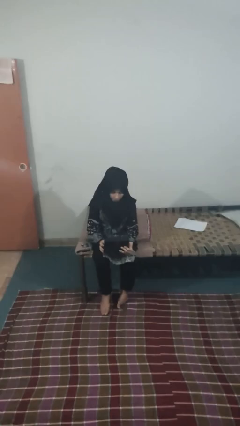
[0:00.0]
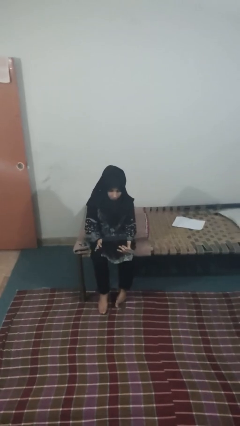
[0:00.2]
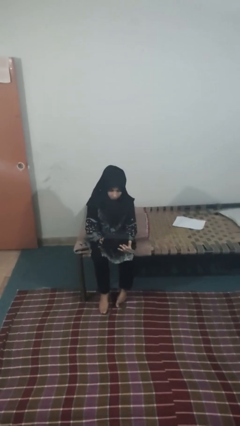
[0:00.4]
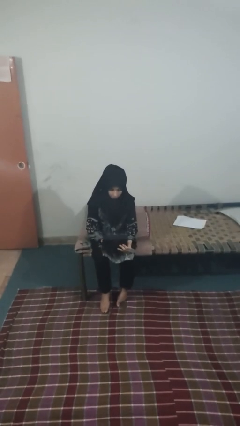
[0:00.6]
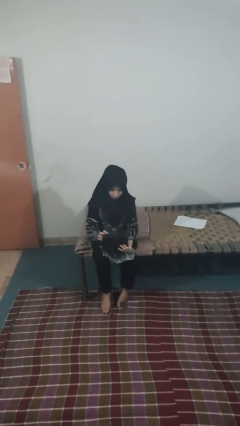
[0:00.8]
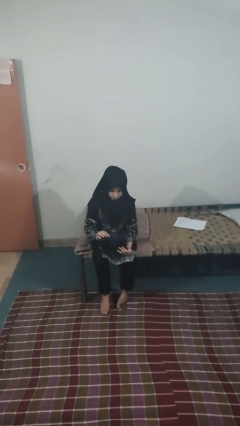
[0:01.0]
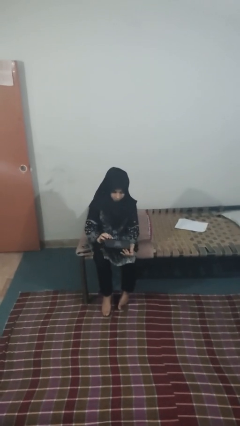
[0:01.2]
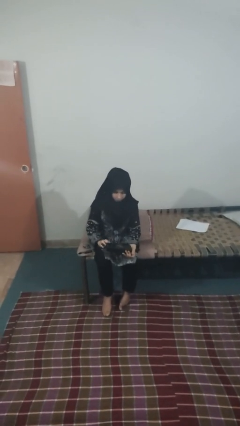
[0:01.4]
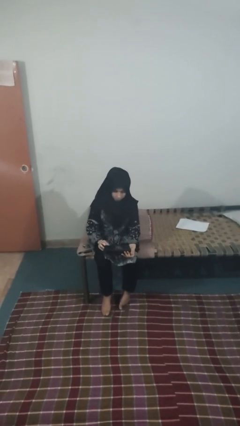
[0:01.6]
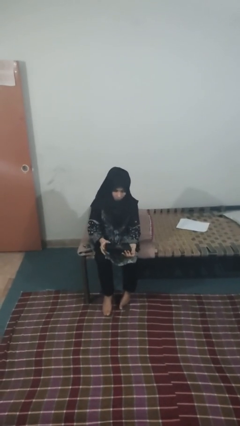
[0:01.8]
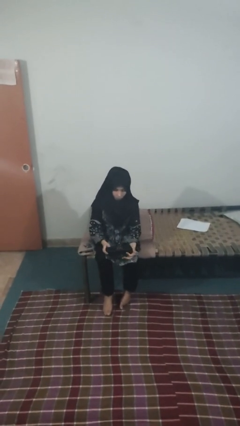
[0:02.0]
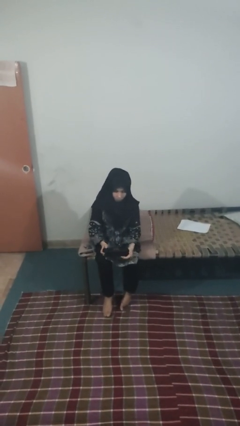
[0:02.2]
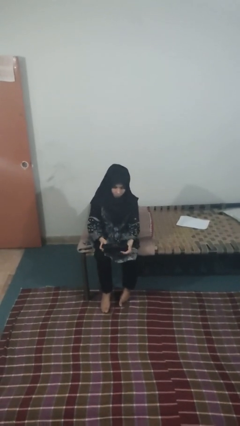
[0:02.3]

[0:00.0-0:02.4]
person closes jewelry box

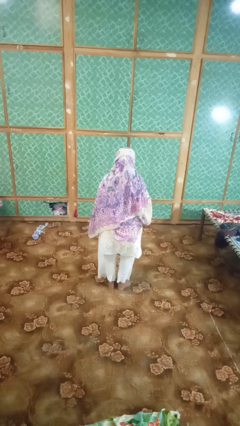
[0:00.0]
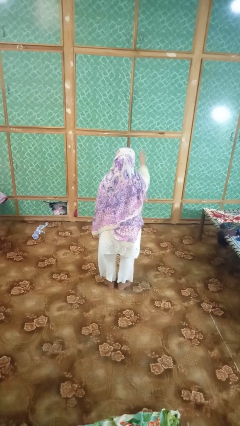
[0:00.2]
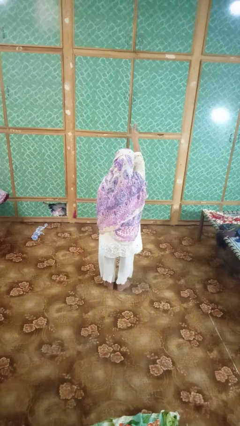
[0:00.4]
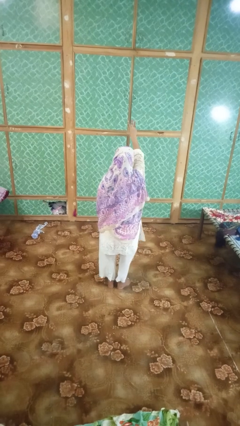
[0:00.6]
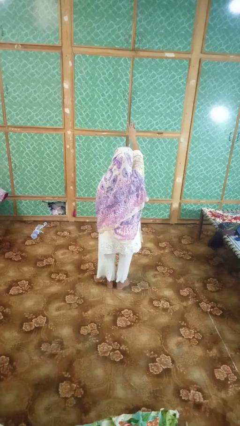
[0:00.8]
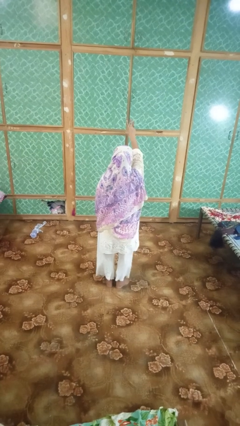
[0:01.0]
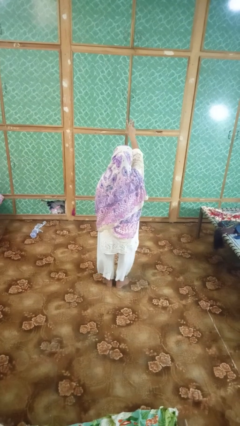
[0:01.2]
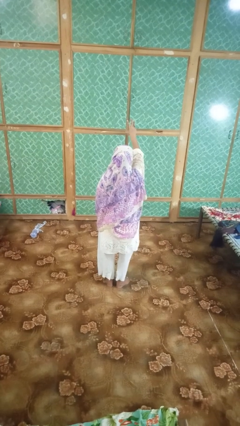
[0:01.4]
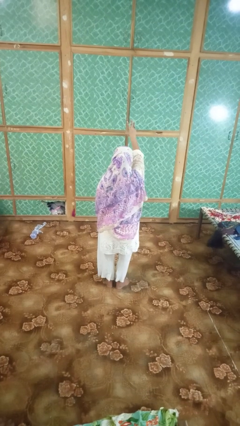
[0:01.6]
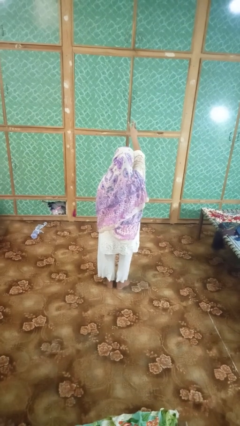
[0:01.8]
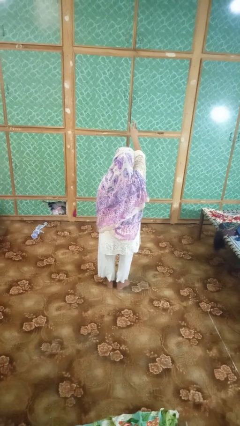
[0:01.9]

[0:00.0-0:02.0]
person gestures number three

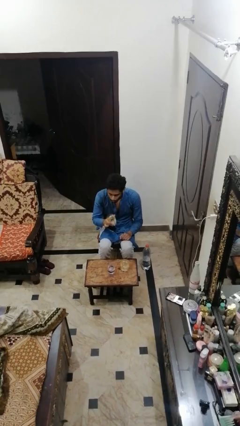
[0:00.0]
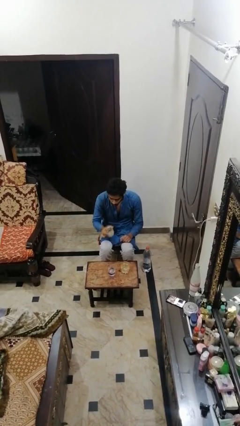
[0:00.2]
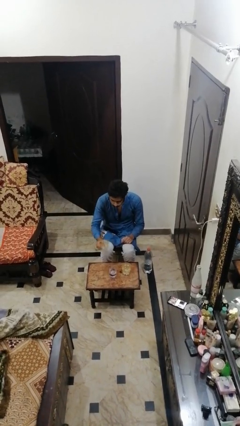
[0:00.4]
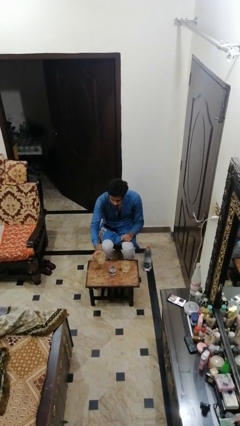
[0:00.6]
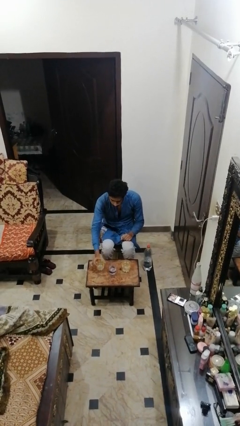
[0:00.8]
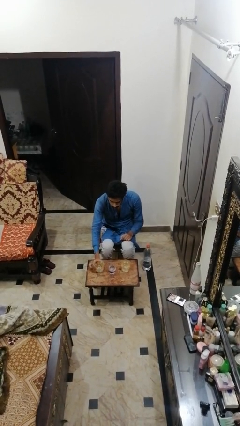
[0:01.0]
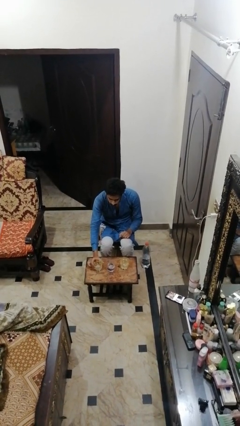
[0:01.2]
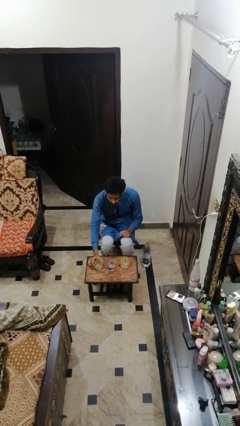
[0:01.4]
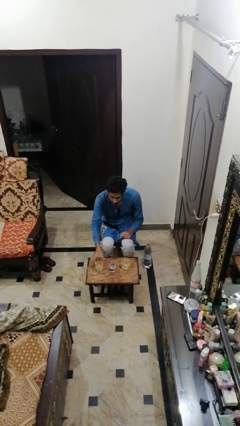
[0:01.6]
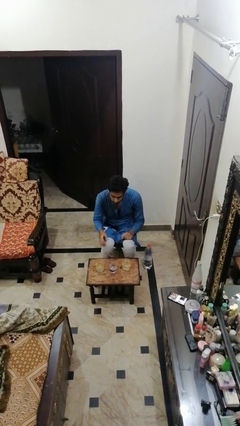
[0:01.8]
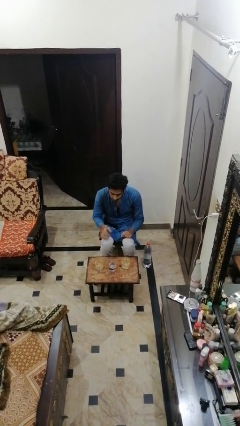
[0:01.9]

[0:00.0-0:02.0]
person puts down object on table

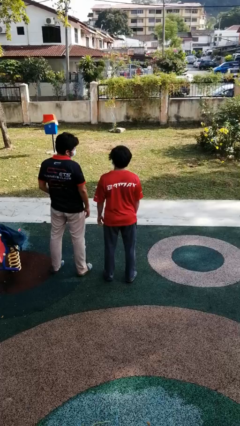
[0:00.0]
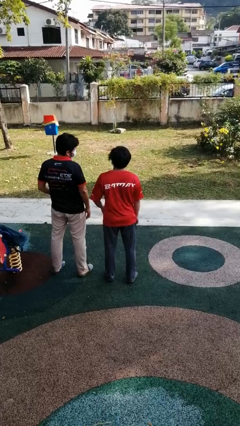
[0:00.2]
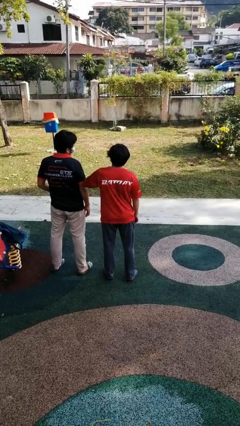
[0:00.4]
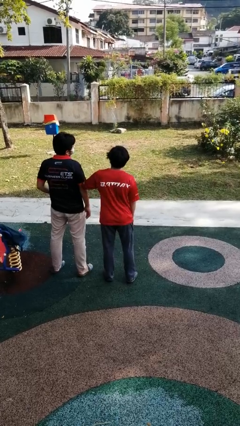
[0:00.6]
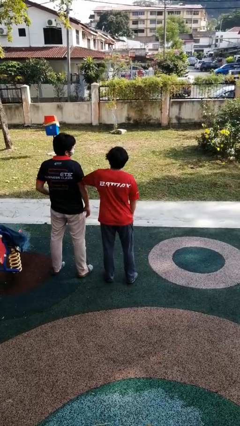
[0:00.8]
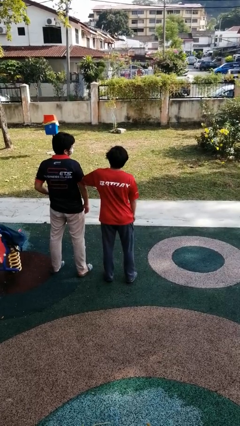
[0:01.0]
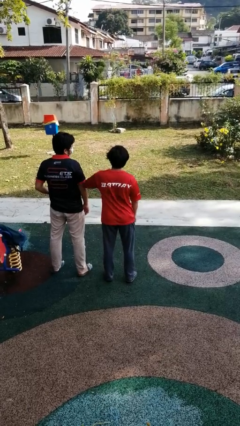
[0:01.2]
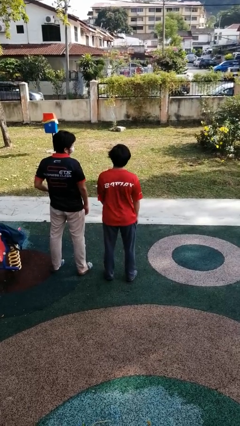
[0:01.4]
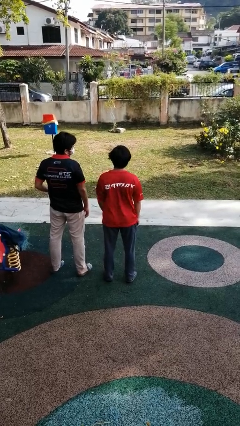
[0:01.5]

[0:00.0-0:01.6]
person nudges person with elbow

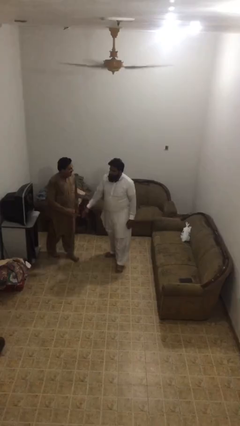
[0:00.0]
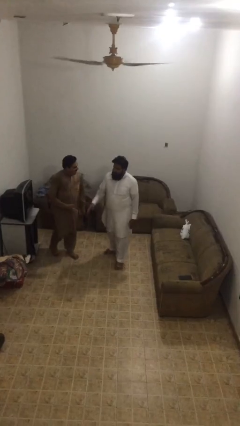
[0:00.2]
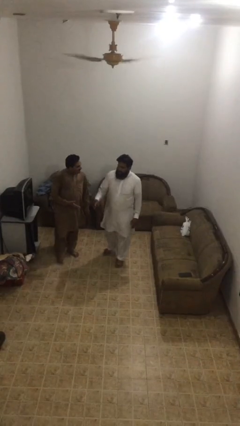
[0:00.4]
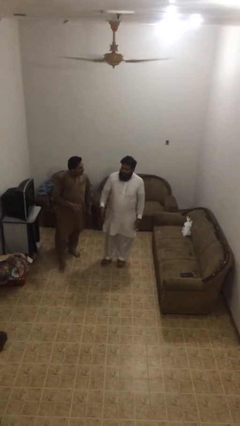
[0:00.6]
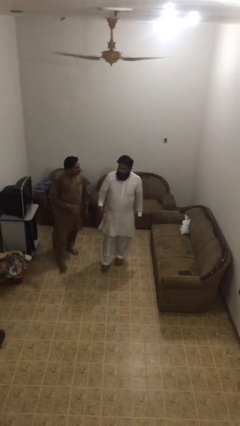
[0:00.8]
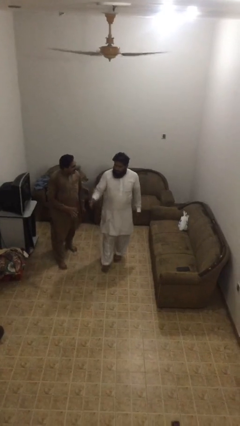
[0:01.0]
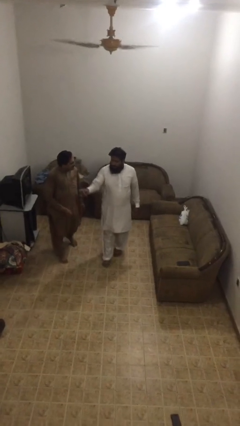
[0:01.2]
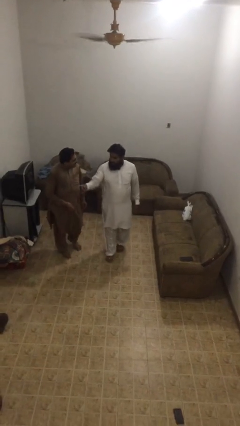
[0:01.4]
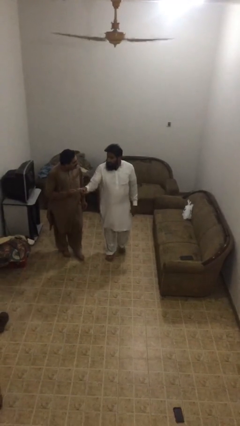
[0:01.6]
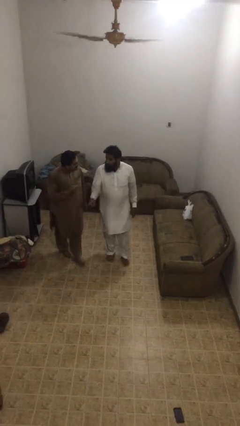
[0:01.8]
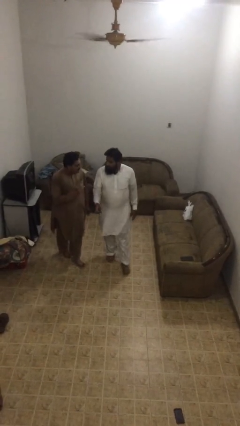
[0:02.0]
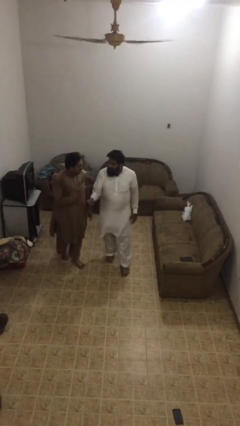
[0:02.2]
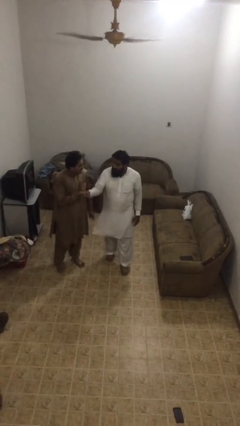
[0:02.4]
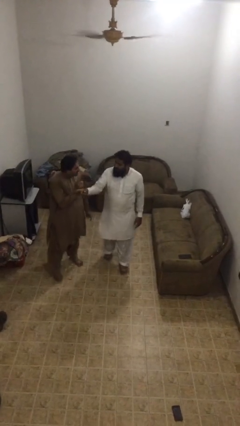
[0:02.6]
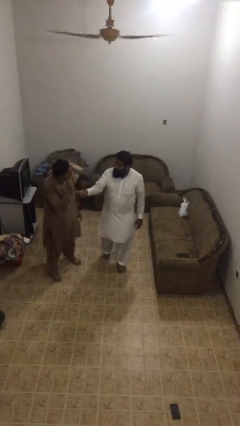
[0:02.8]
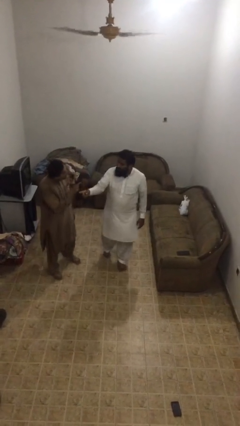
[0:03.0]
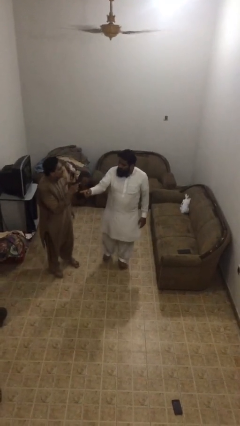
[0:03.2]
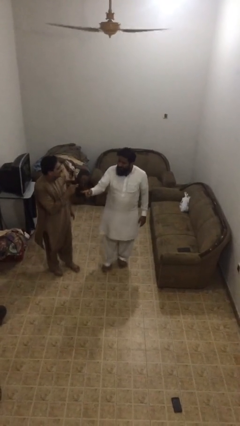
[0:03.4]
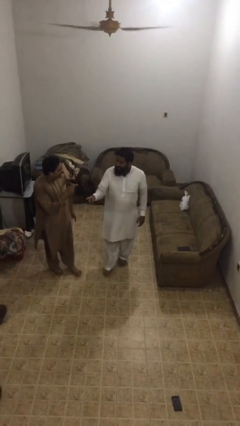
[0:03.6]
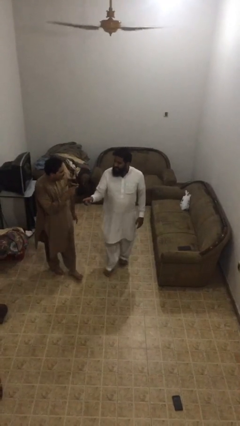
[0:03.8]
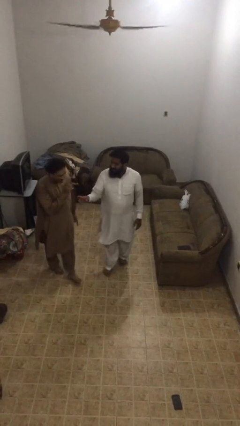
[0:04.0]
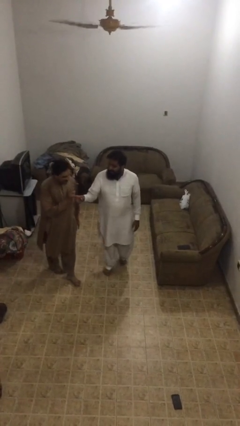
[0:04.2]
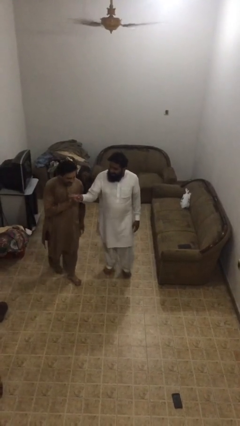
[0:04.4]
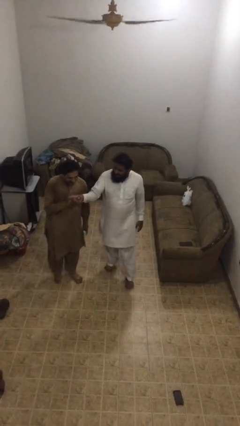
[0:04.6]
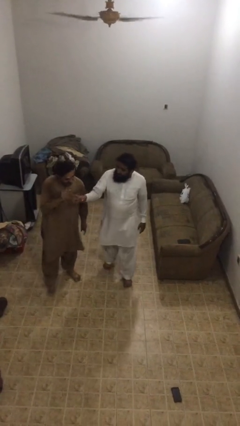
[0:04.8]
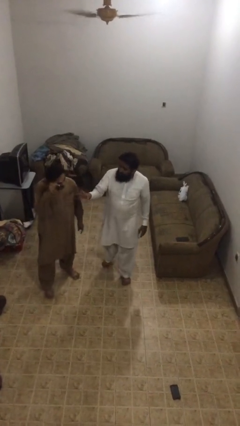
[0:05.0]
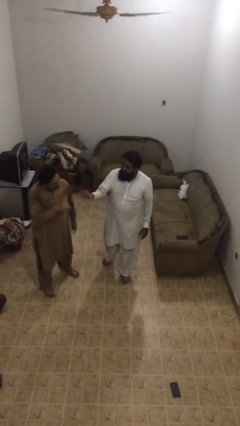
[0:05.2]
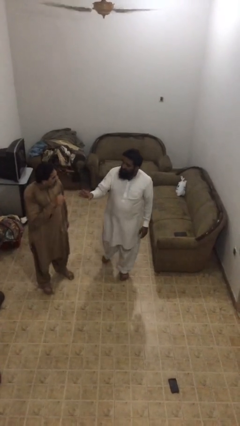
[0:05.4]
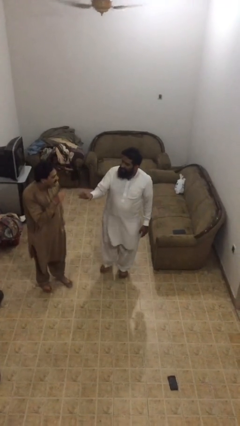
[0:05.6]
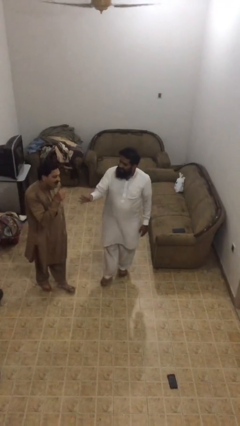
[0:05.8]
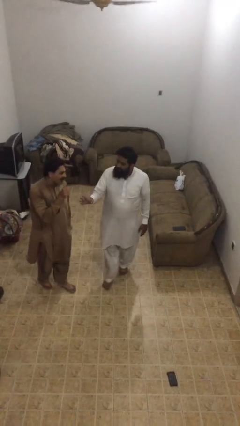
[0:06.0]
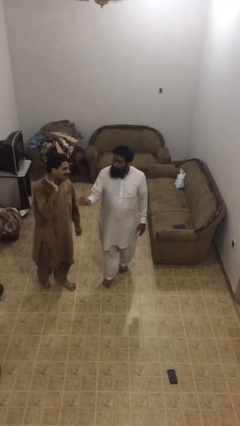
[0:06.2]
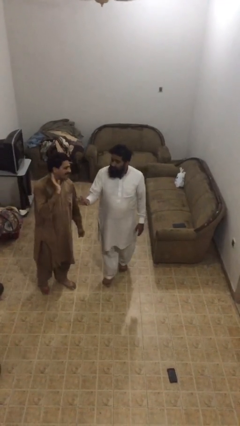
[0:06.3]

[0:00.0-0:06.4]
person talks to person

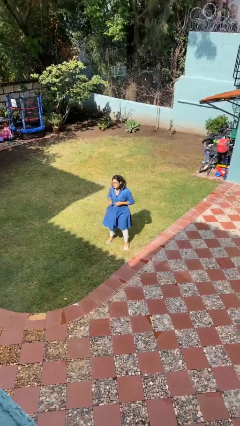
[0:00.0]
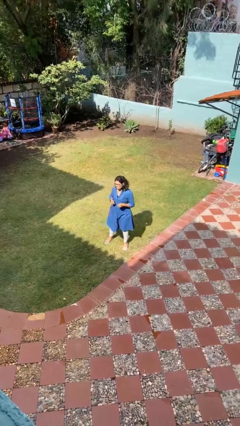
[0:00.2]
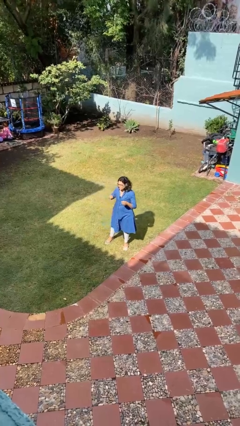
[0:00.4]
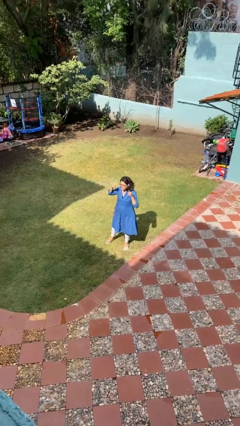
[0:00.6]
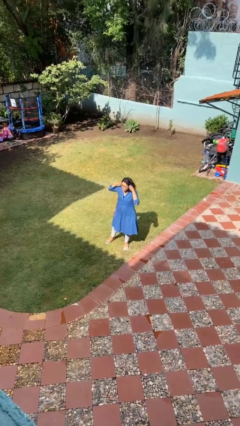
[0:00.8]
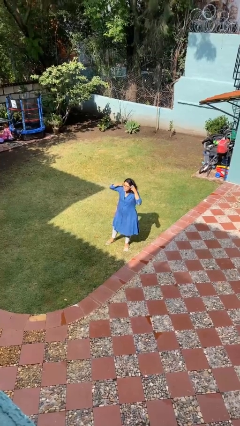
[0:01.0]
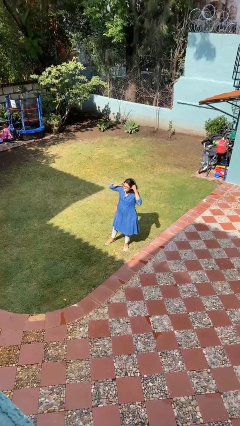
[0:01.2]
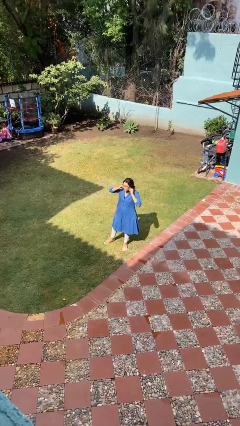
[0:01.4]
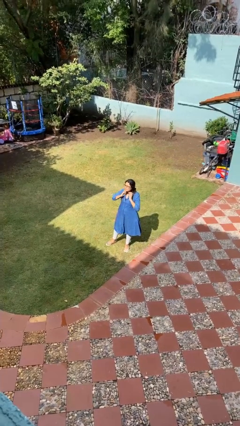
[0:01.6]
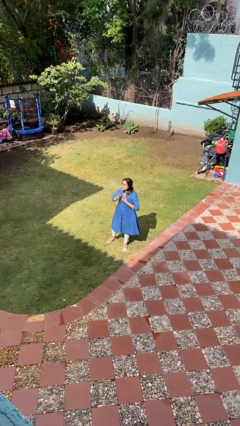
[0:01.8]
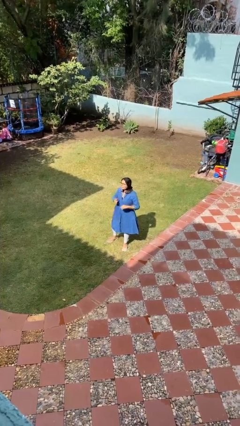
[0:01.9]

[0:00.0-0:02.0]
person takes off headphones

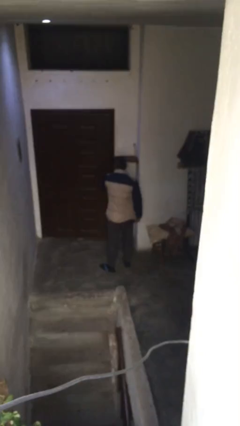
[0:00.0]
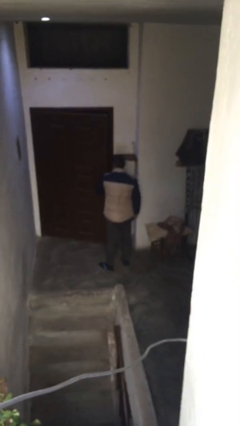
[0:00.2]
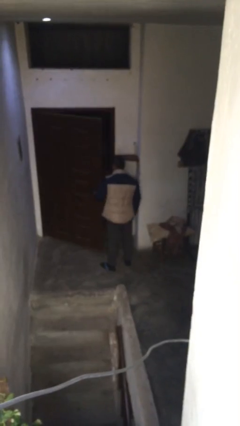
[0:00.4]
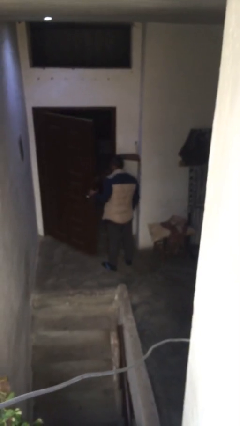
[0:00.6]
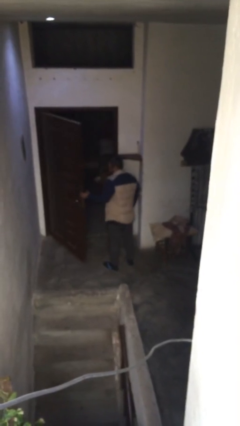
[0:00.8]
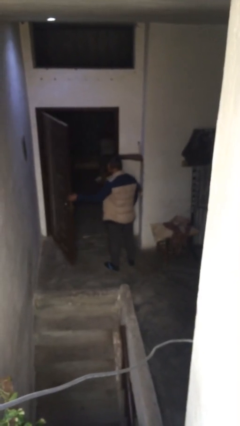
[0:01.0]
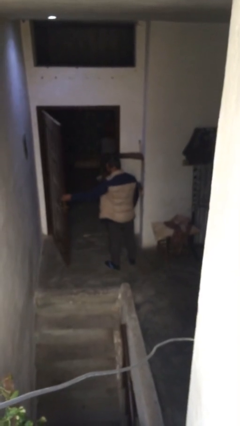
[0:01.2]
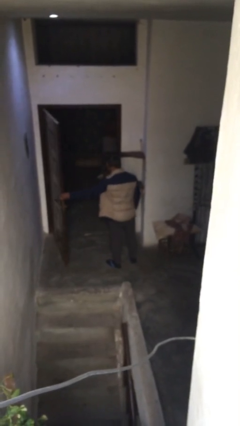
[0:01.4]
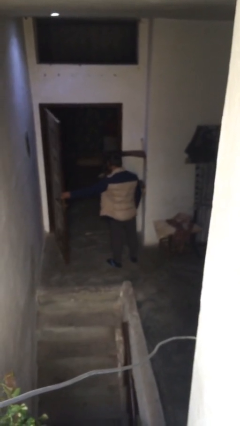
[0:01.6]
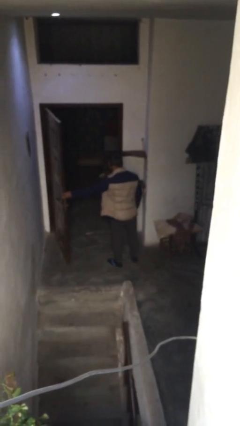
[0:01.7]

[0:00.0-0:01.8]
person opens facility door
